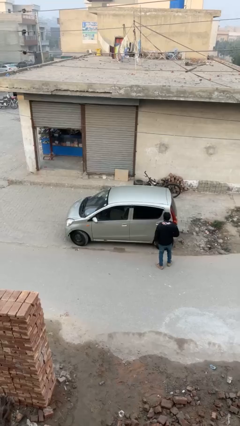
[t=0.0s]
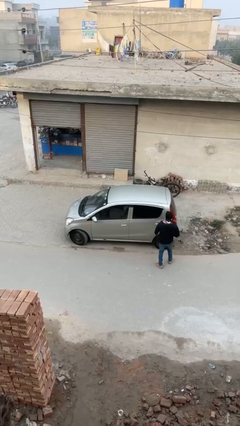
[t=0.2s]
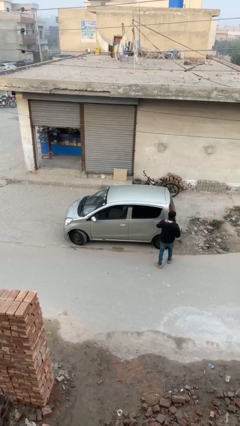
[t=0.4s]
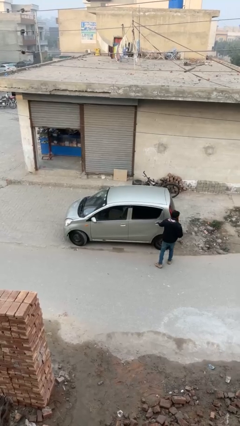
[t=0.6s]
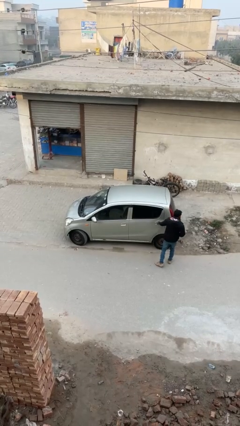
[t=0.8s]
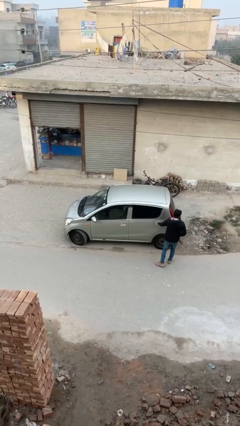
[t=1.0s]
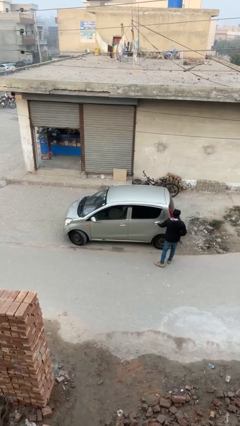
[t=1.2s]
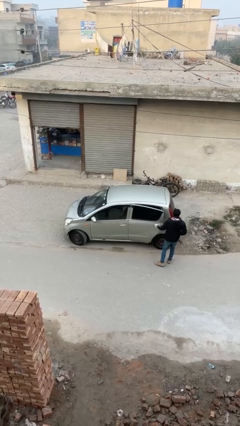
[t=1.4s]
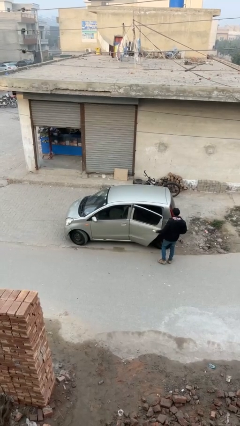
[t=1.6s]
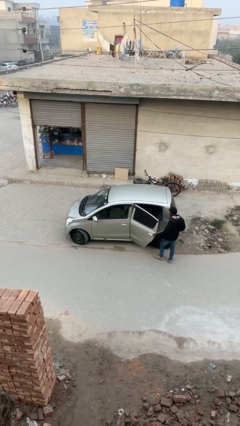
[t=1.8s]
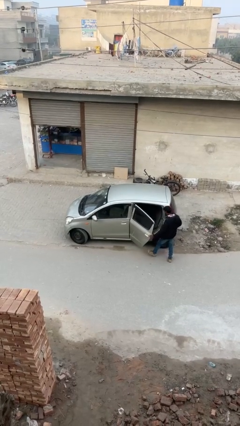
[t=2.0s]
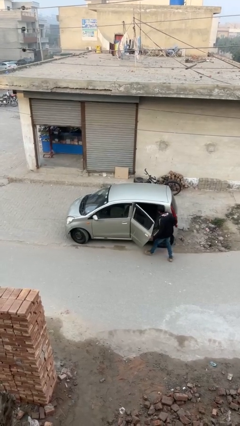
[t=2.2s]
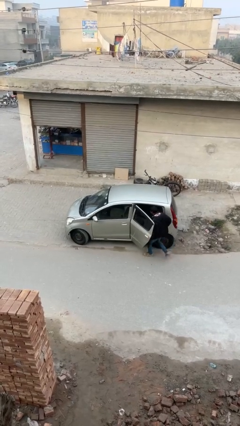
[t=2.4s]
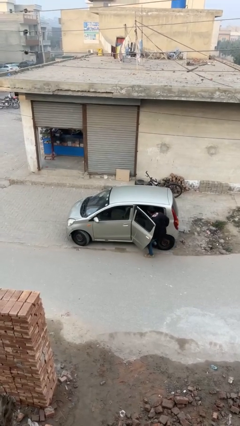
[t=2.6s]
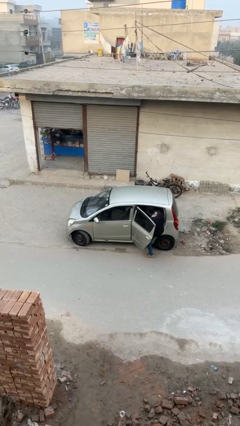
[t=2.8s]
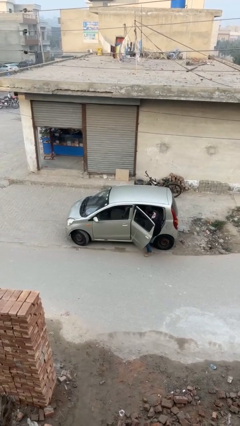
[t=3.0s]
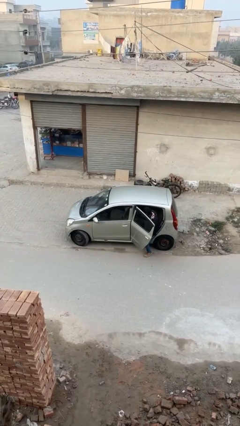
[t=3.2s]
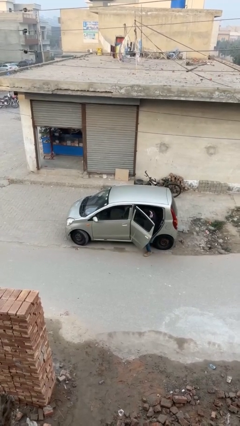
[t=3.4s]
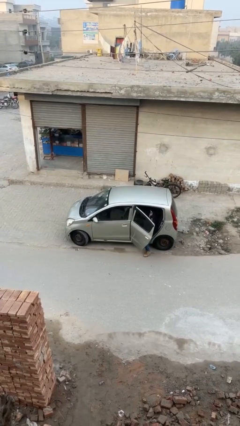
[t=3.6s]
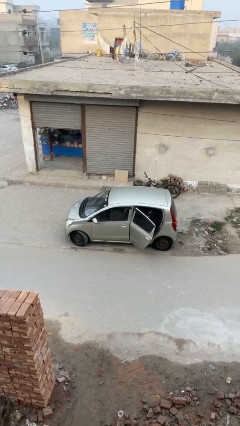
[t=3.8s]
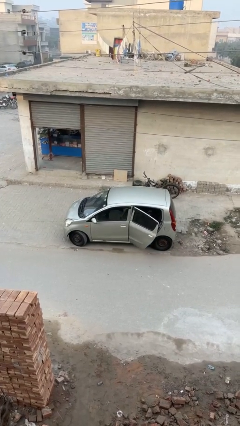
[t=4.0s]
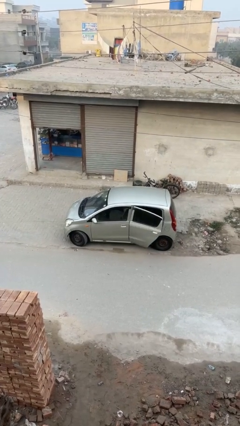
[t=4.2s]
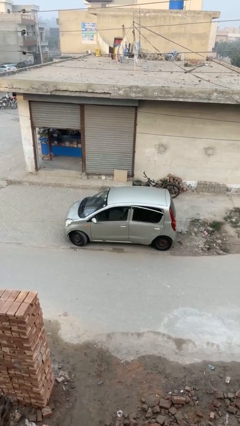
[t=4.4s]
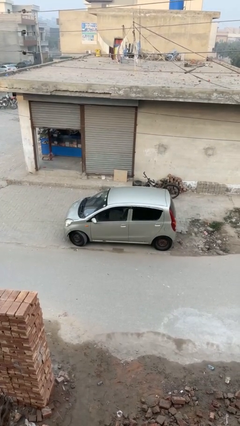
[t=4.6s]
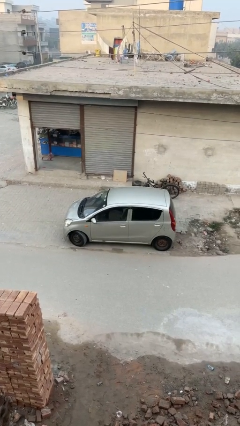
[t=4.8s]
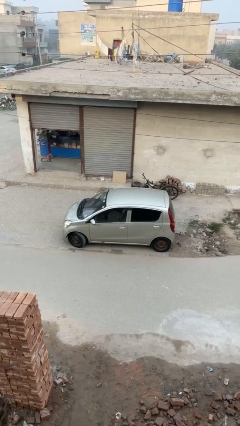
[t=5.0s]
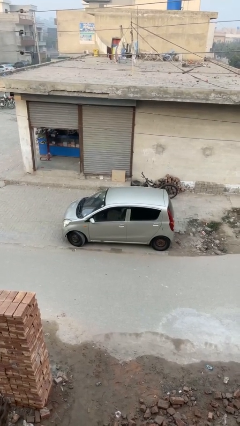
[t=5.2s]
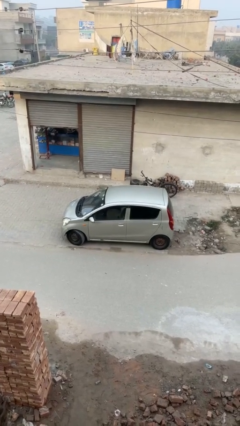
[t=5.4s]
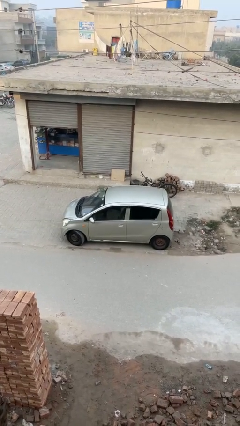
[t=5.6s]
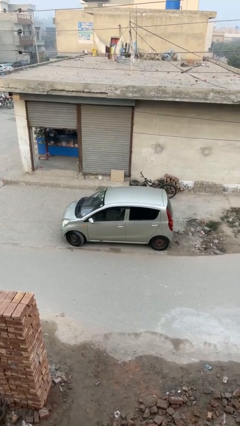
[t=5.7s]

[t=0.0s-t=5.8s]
car picks up person

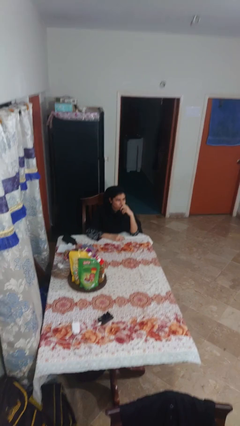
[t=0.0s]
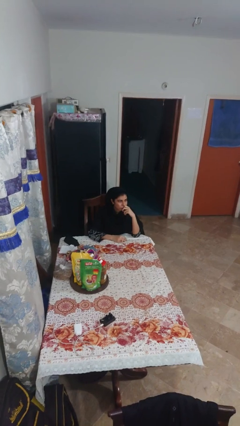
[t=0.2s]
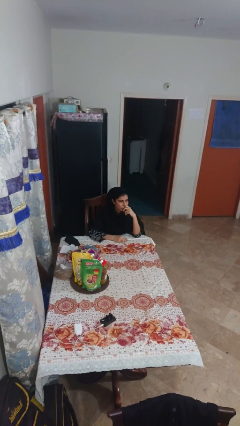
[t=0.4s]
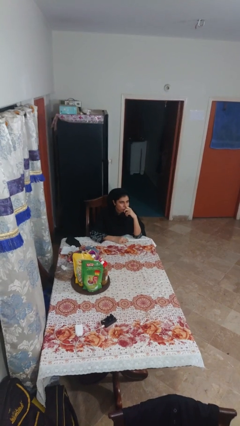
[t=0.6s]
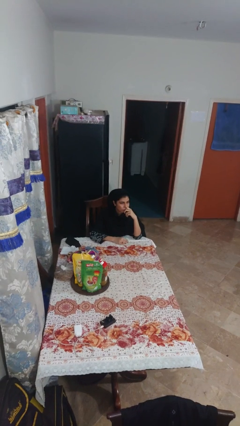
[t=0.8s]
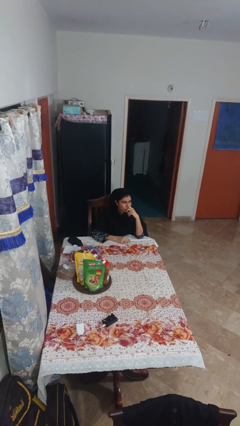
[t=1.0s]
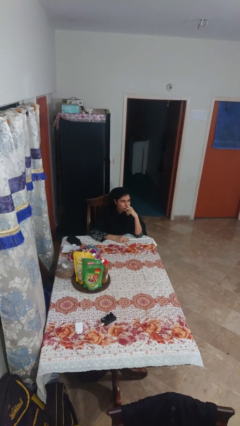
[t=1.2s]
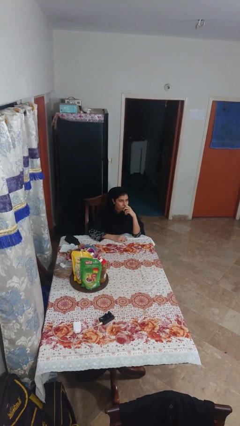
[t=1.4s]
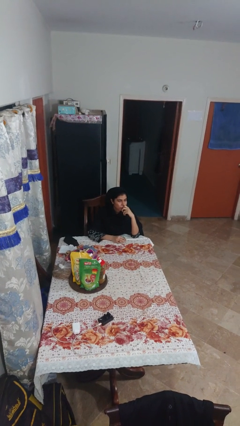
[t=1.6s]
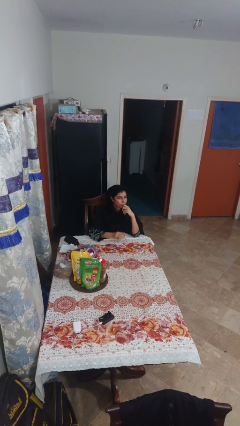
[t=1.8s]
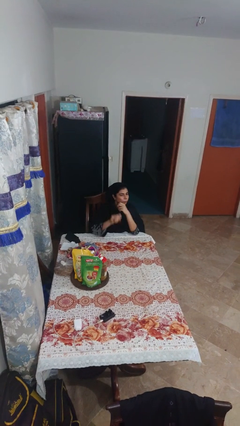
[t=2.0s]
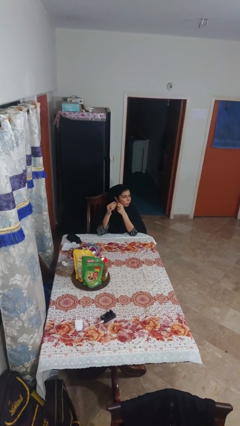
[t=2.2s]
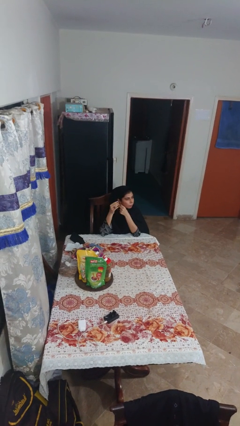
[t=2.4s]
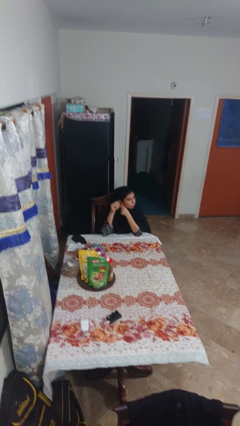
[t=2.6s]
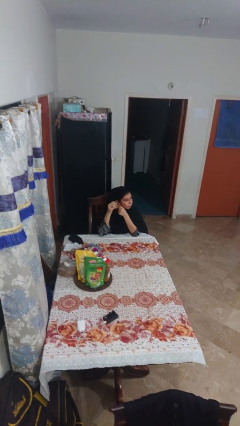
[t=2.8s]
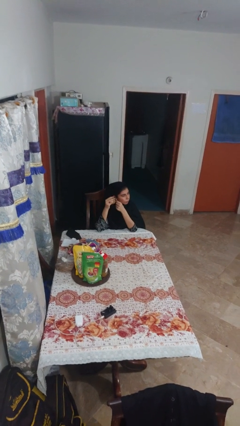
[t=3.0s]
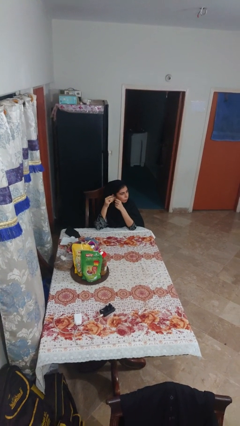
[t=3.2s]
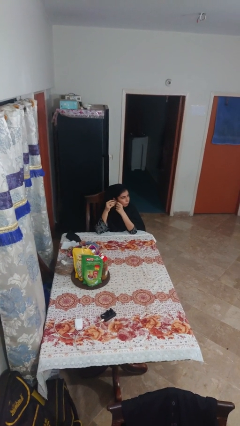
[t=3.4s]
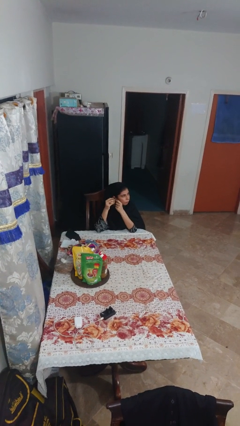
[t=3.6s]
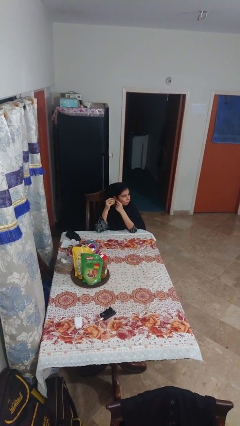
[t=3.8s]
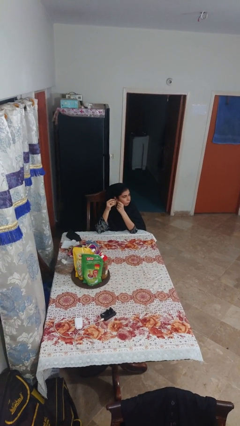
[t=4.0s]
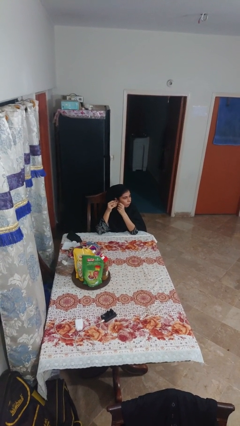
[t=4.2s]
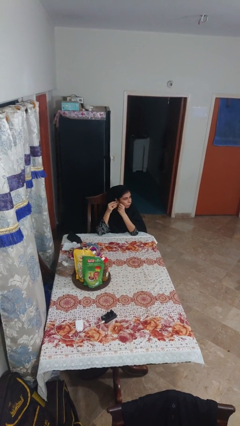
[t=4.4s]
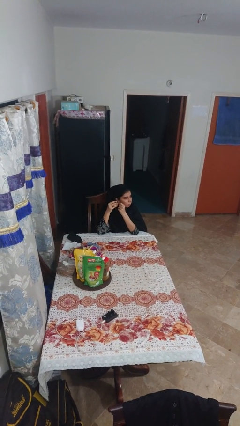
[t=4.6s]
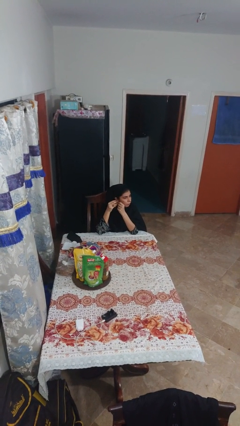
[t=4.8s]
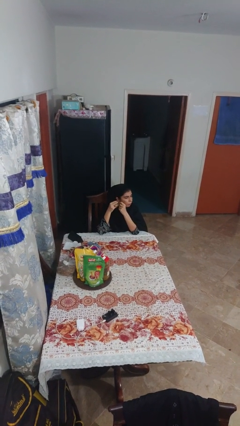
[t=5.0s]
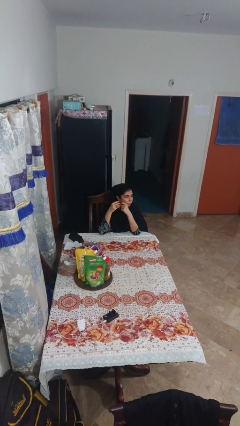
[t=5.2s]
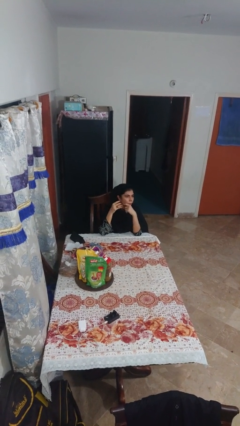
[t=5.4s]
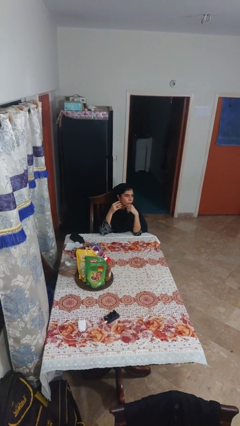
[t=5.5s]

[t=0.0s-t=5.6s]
person puts on earrings

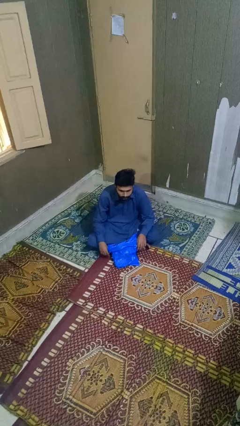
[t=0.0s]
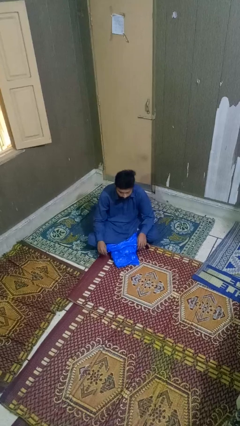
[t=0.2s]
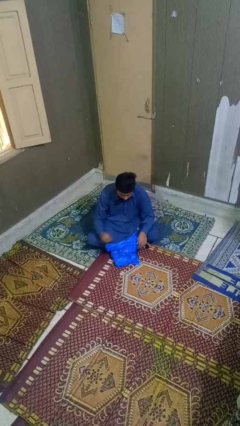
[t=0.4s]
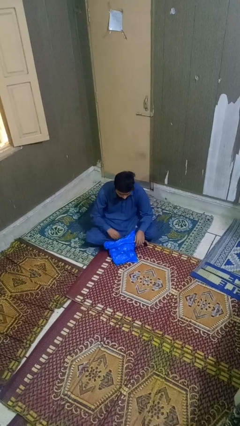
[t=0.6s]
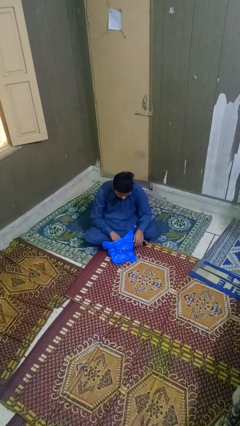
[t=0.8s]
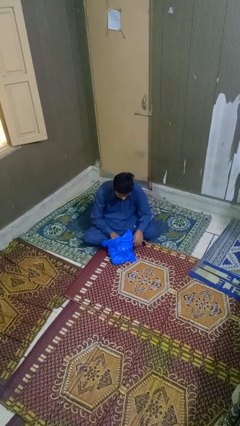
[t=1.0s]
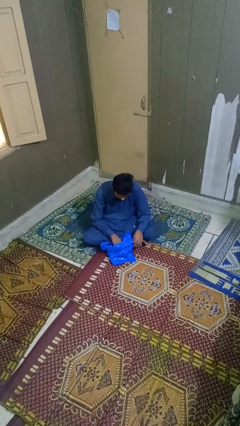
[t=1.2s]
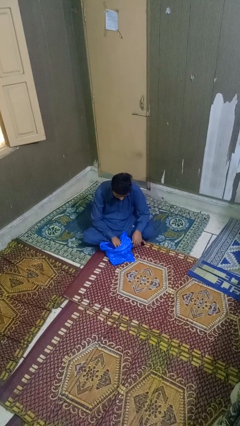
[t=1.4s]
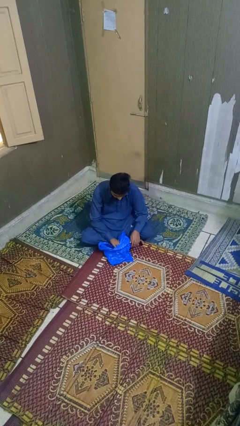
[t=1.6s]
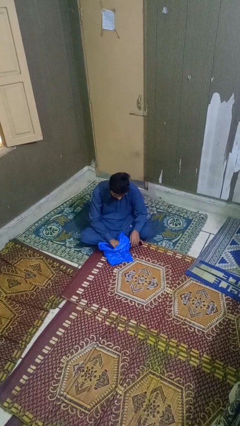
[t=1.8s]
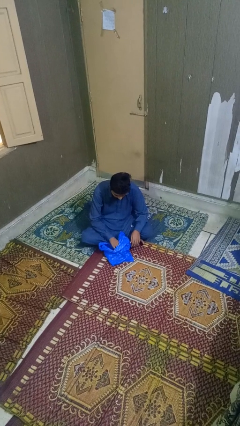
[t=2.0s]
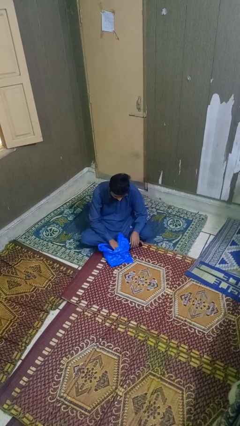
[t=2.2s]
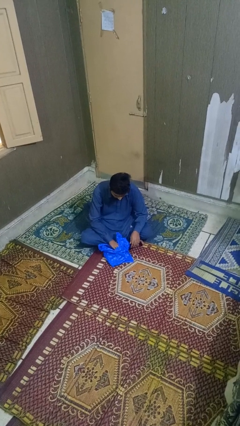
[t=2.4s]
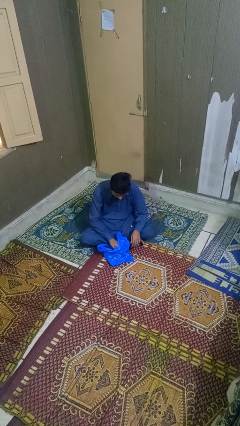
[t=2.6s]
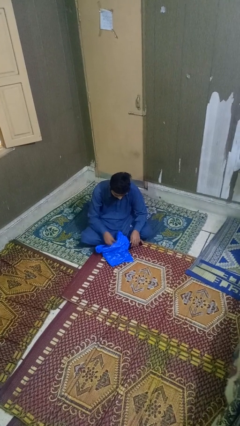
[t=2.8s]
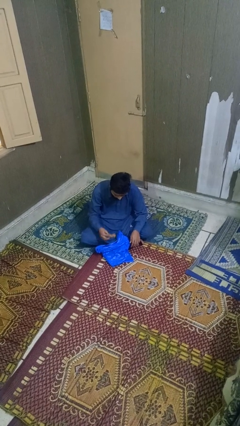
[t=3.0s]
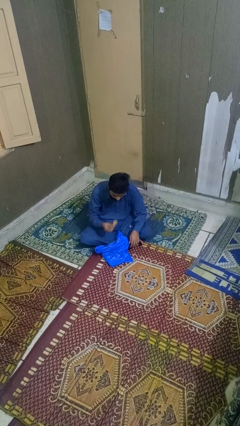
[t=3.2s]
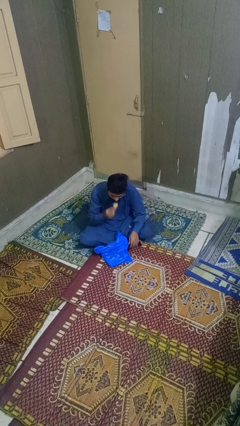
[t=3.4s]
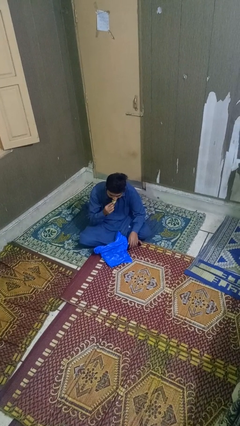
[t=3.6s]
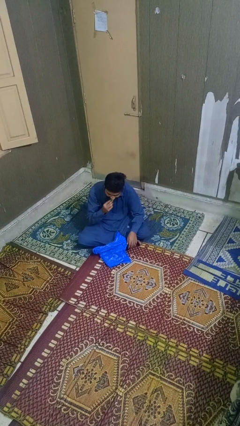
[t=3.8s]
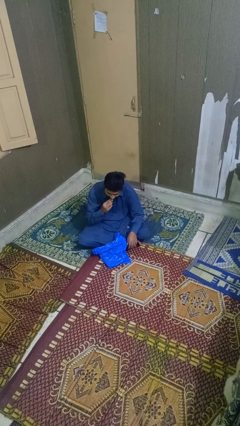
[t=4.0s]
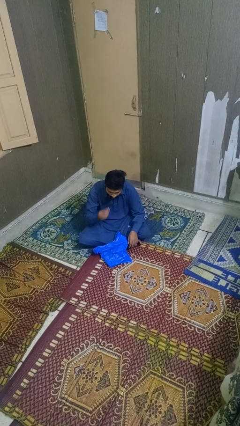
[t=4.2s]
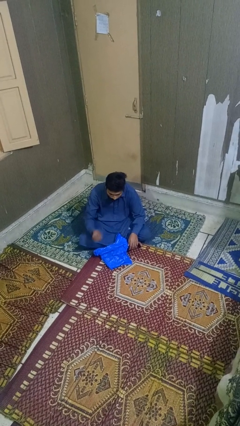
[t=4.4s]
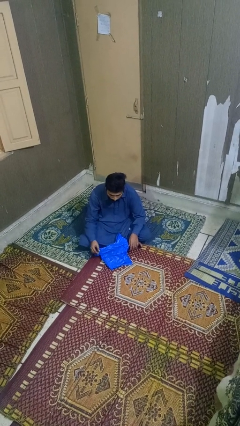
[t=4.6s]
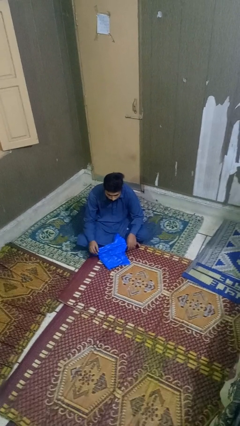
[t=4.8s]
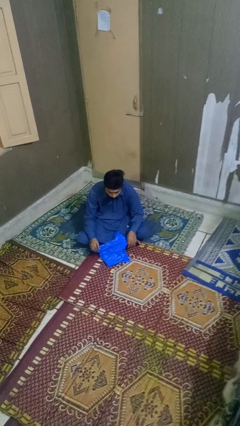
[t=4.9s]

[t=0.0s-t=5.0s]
person eats snack from bag

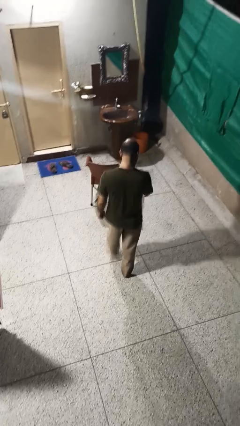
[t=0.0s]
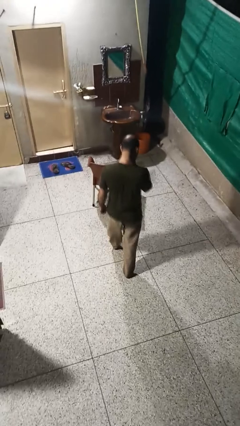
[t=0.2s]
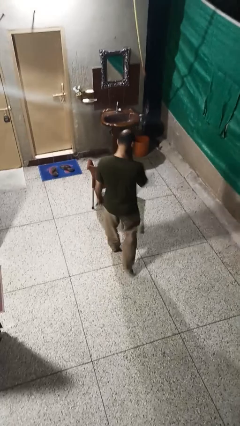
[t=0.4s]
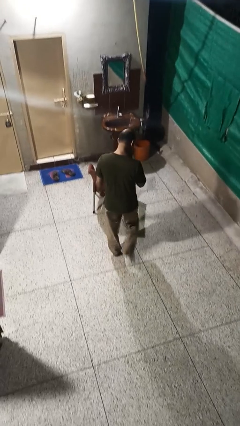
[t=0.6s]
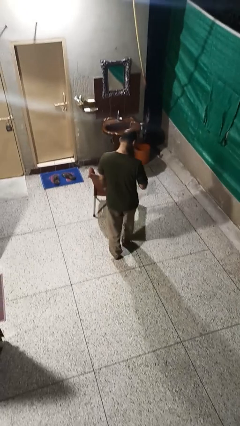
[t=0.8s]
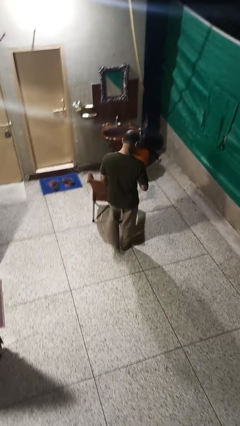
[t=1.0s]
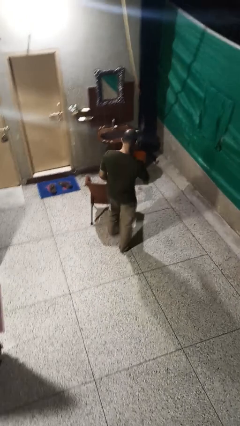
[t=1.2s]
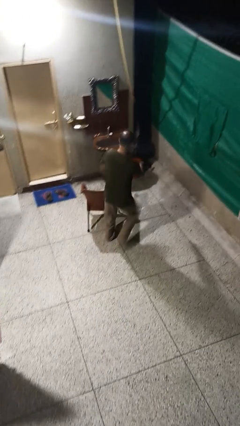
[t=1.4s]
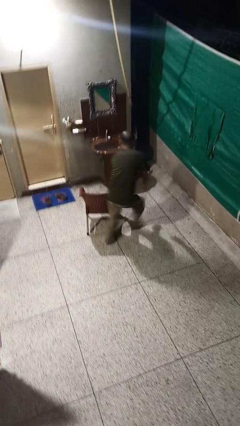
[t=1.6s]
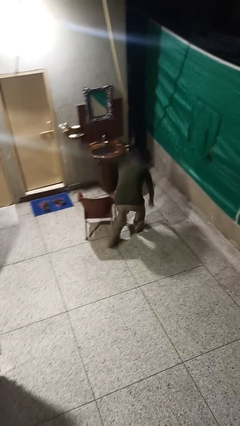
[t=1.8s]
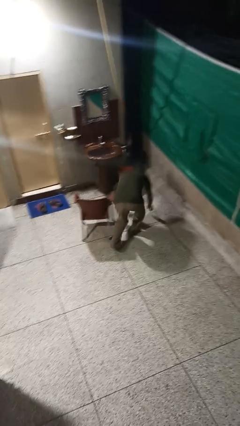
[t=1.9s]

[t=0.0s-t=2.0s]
person trips on object on floor
